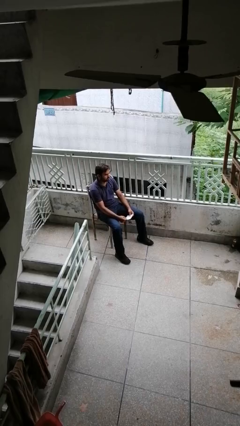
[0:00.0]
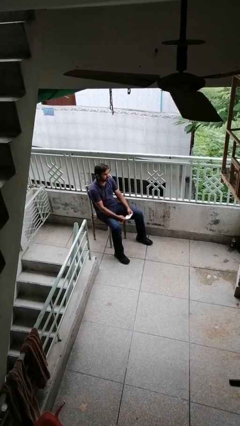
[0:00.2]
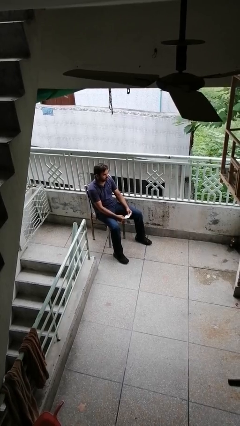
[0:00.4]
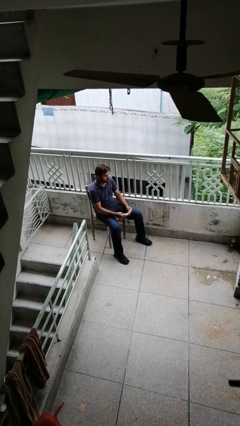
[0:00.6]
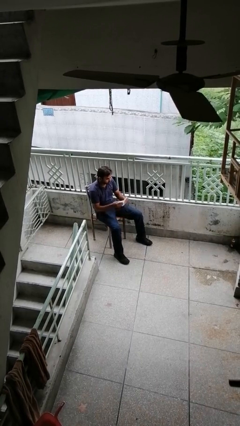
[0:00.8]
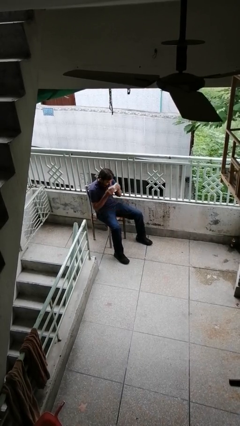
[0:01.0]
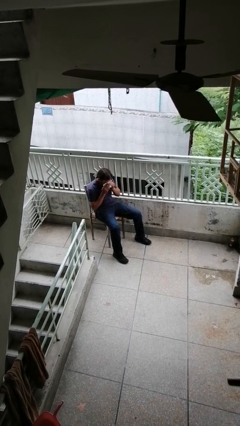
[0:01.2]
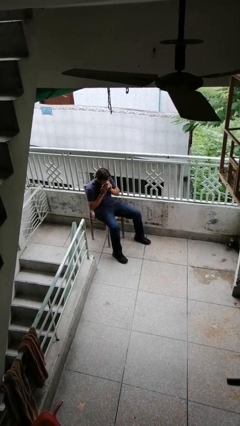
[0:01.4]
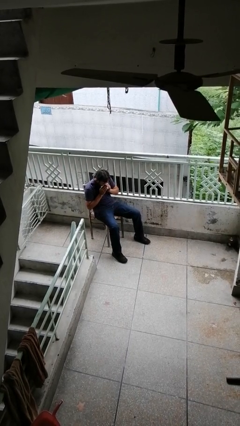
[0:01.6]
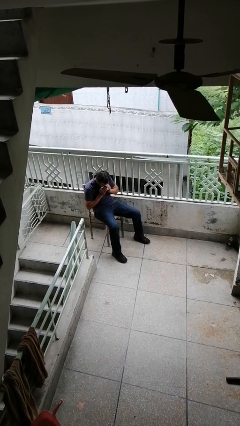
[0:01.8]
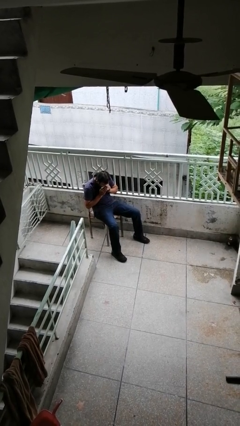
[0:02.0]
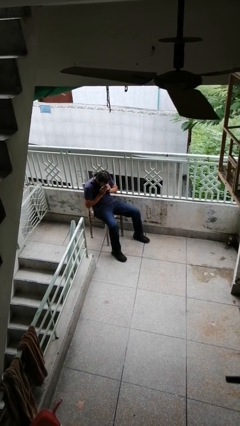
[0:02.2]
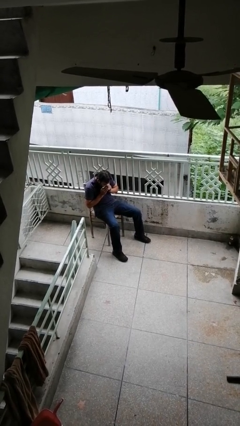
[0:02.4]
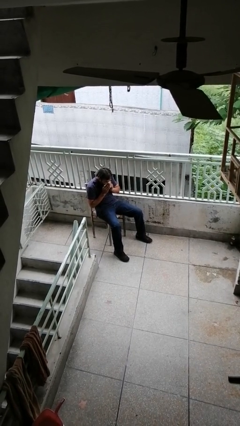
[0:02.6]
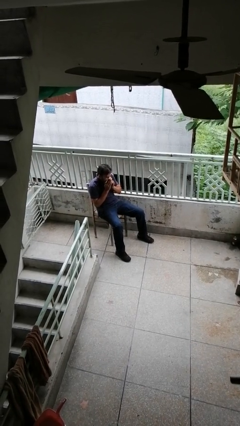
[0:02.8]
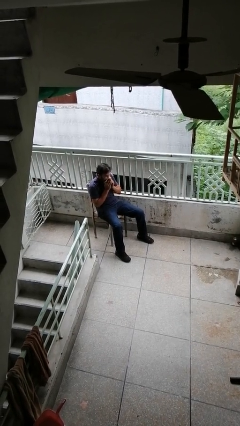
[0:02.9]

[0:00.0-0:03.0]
person blows nose

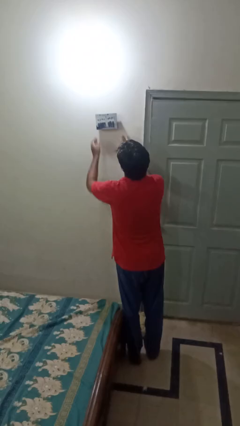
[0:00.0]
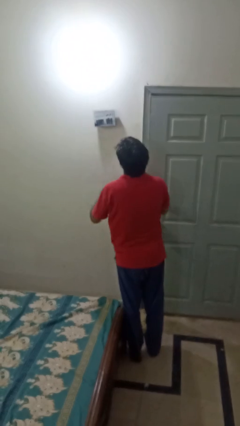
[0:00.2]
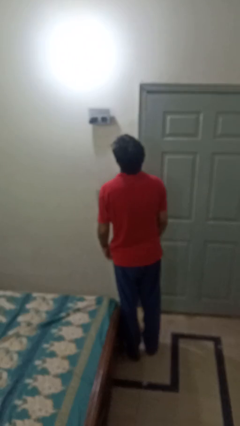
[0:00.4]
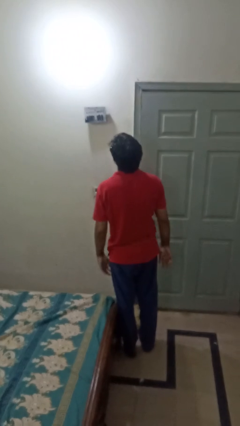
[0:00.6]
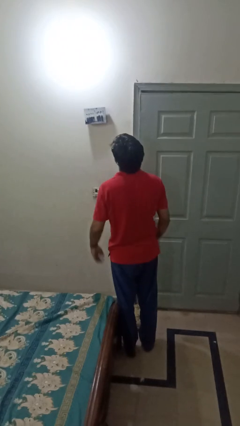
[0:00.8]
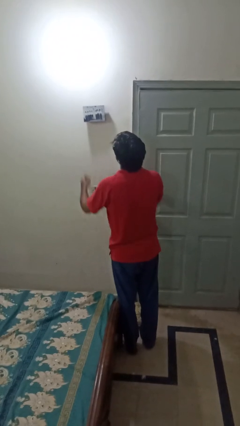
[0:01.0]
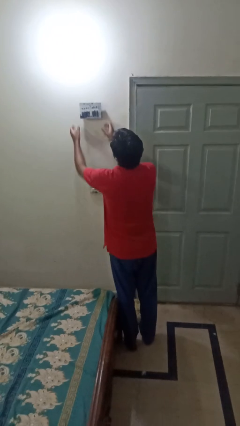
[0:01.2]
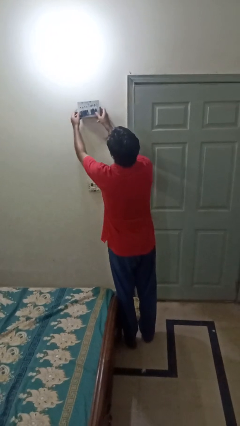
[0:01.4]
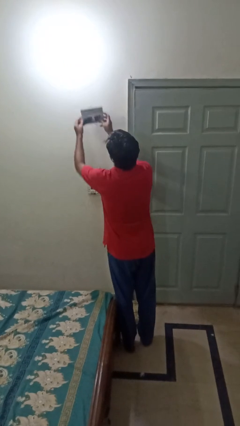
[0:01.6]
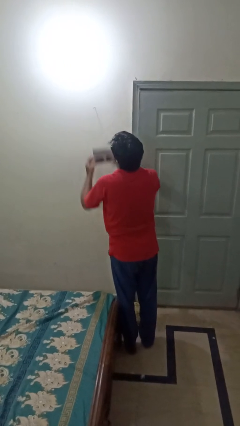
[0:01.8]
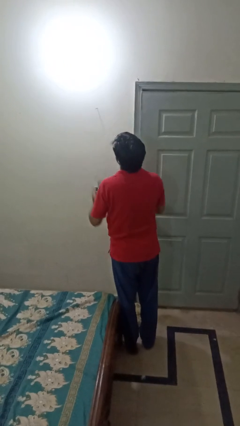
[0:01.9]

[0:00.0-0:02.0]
person takes down picture frame

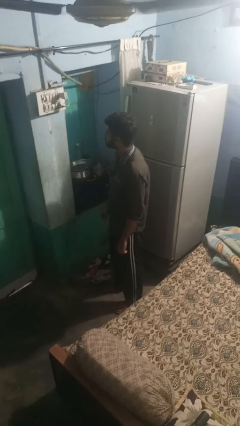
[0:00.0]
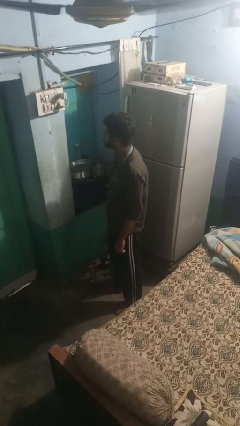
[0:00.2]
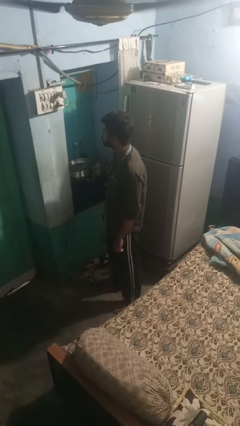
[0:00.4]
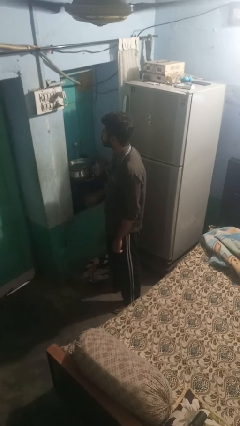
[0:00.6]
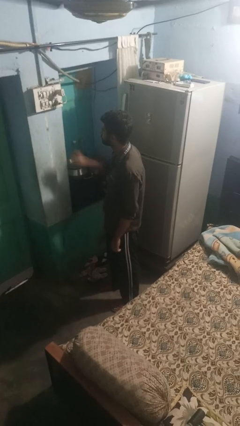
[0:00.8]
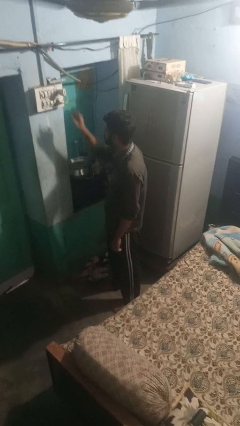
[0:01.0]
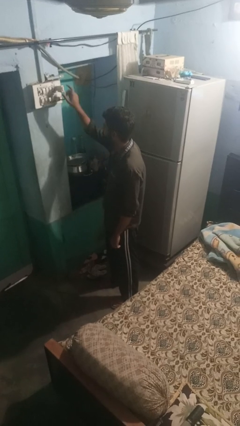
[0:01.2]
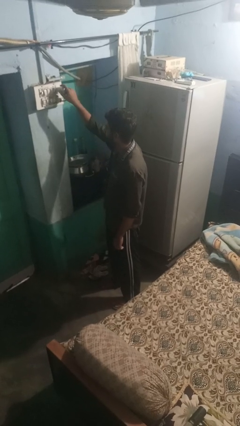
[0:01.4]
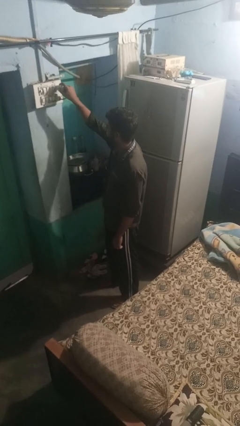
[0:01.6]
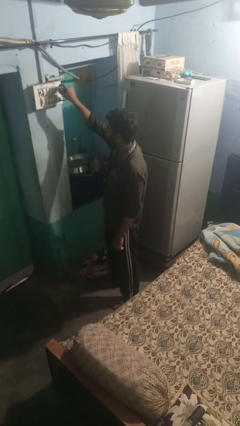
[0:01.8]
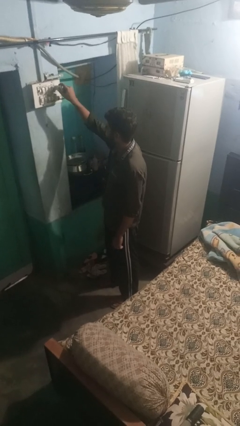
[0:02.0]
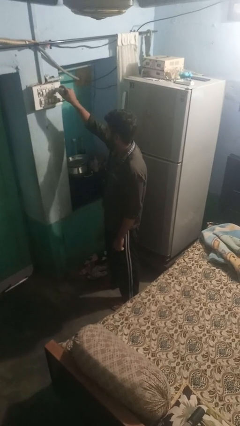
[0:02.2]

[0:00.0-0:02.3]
person unplugs from electrical socket

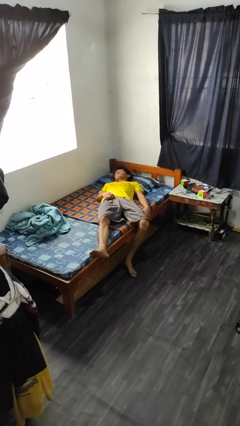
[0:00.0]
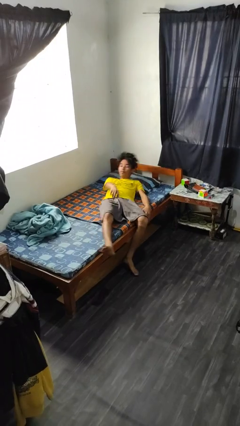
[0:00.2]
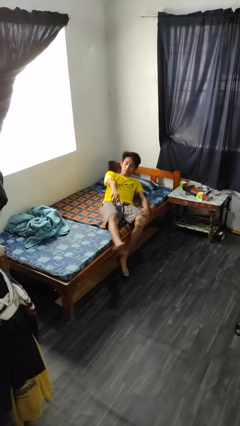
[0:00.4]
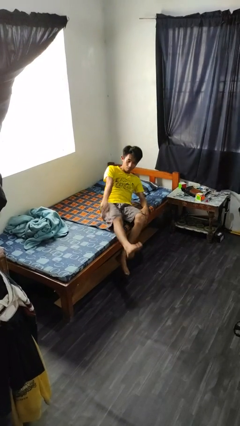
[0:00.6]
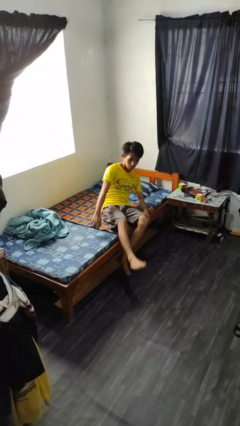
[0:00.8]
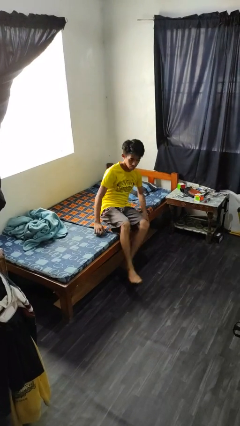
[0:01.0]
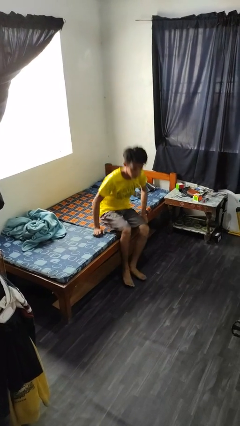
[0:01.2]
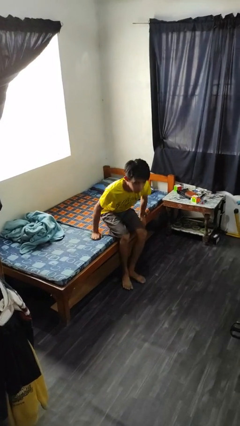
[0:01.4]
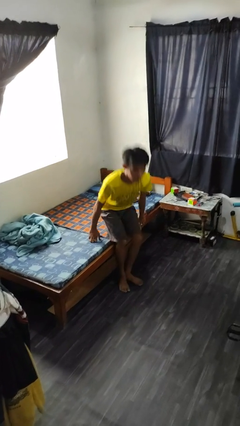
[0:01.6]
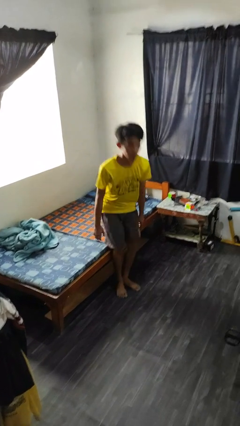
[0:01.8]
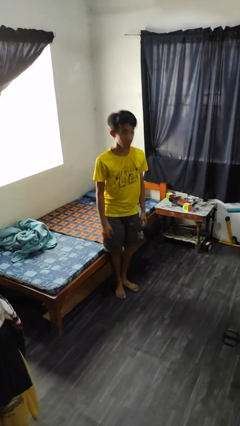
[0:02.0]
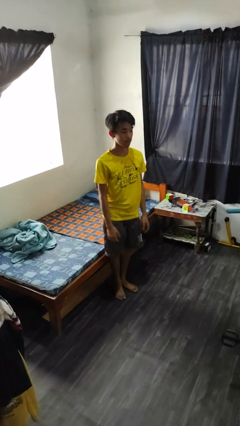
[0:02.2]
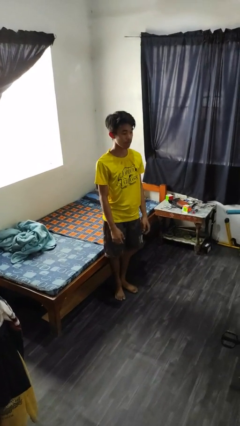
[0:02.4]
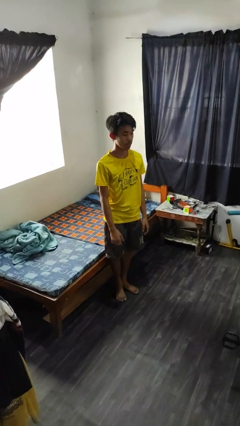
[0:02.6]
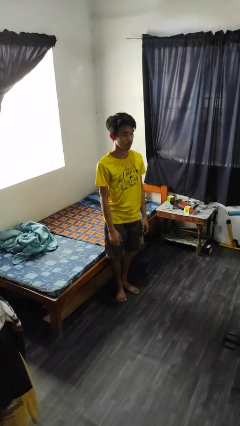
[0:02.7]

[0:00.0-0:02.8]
person stands up

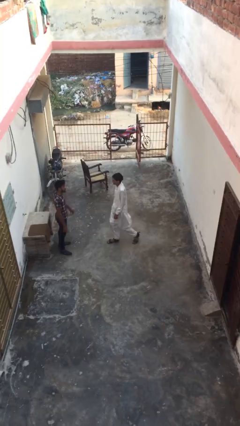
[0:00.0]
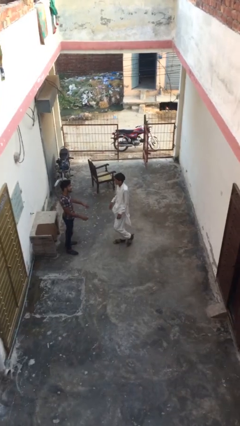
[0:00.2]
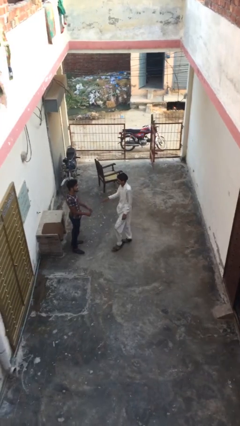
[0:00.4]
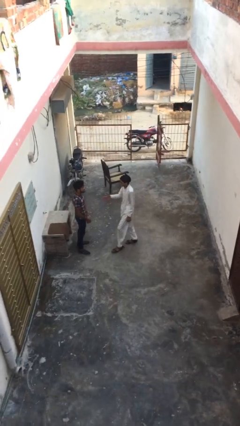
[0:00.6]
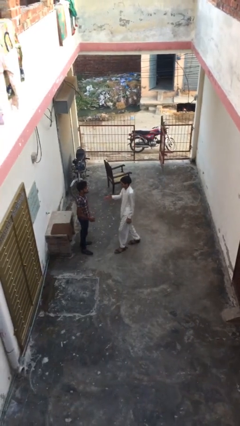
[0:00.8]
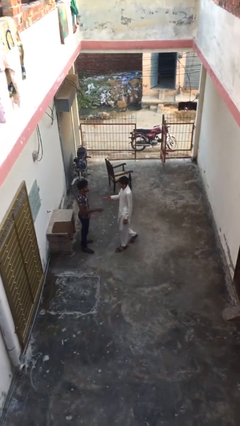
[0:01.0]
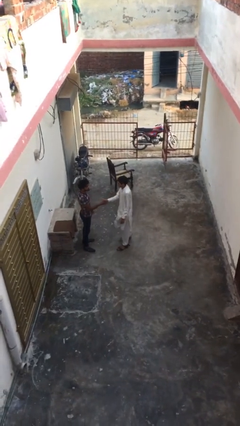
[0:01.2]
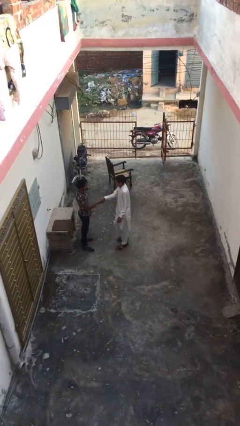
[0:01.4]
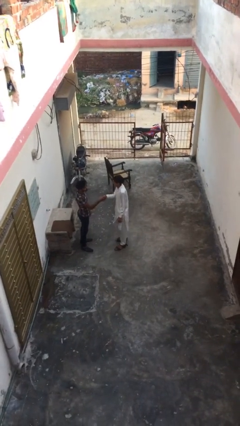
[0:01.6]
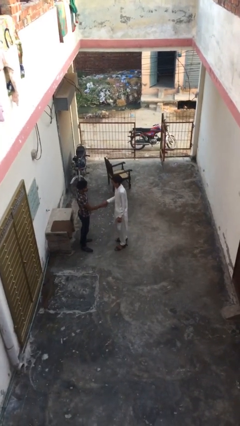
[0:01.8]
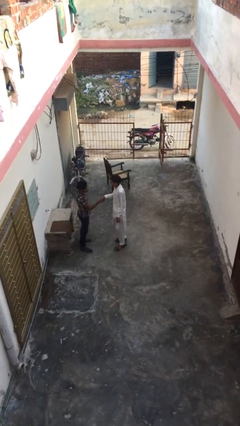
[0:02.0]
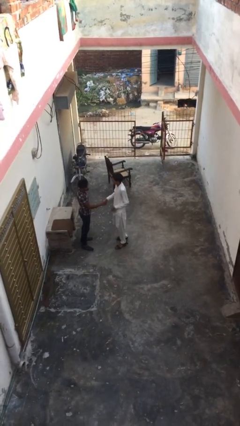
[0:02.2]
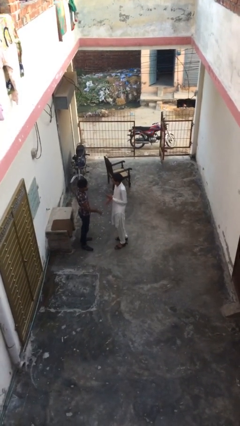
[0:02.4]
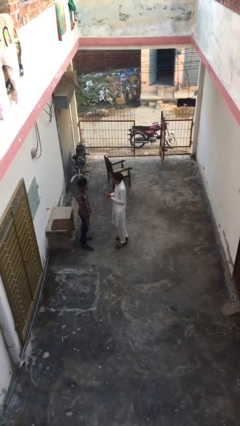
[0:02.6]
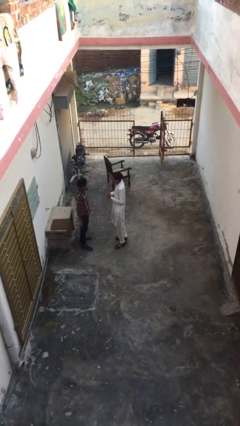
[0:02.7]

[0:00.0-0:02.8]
person shakes hand

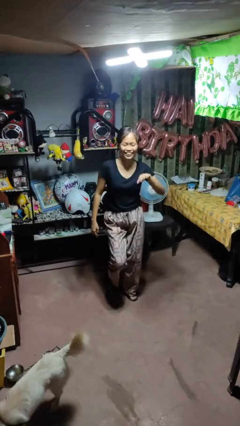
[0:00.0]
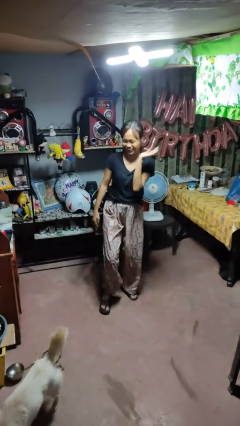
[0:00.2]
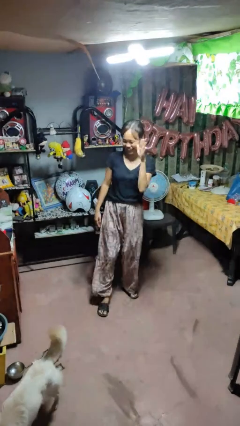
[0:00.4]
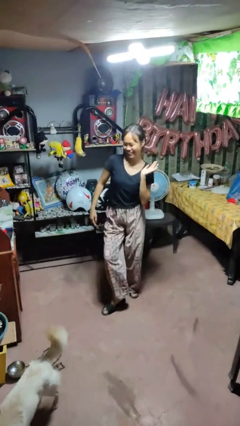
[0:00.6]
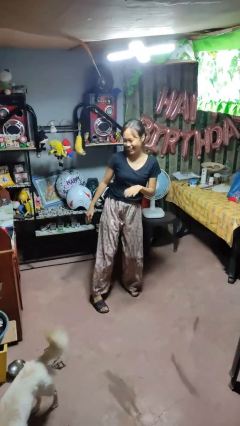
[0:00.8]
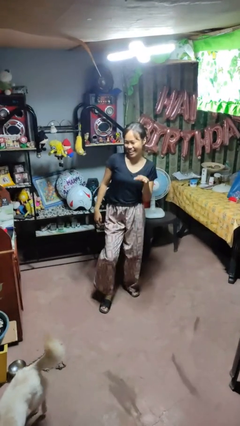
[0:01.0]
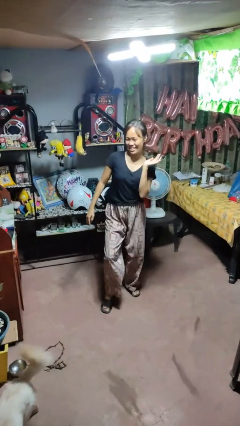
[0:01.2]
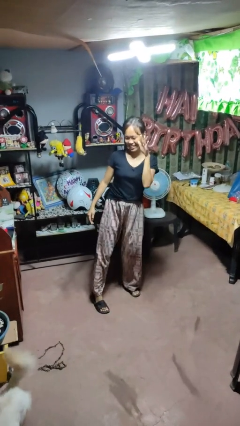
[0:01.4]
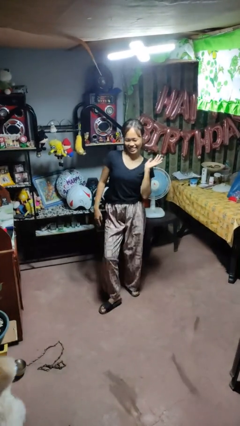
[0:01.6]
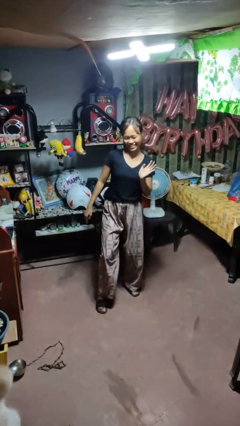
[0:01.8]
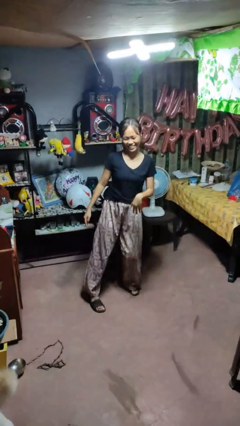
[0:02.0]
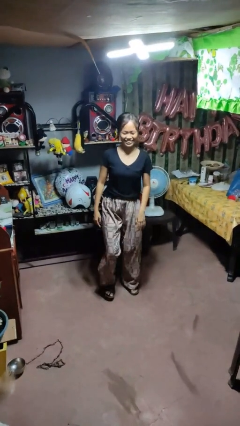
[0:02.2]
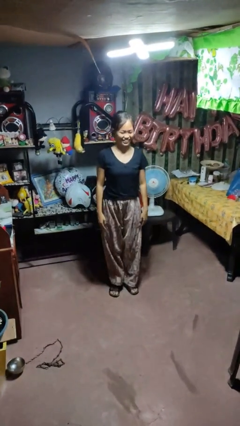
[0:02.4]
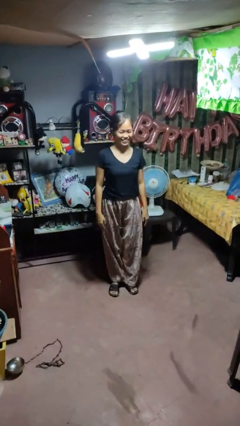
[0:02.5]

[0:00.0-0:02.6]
person dances in place

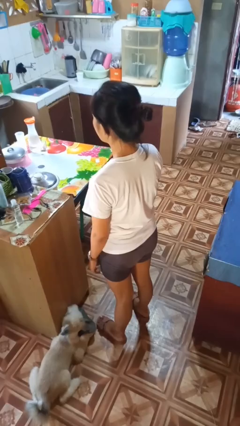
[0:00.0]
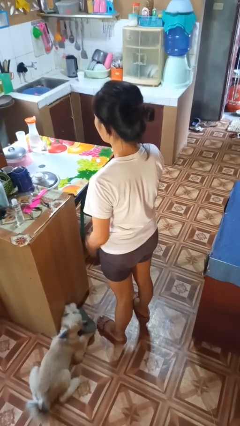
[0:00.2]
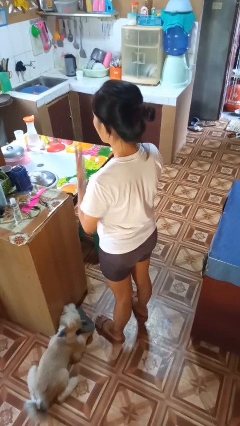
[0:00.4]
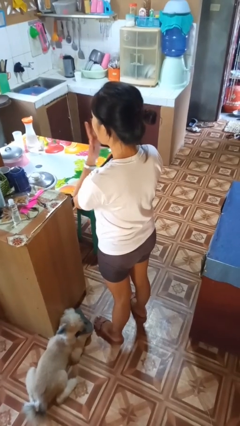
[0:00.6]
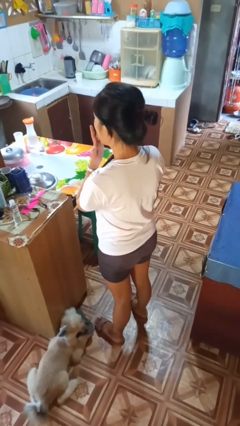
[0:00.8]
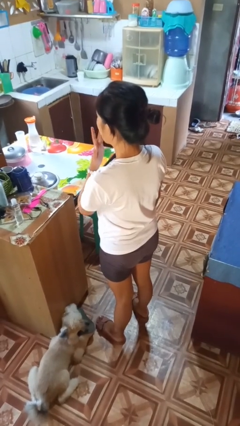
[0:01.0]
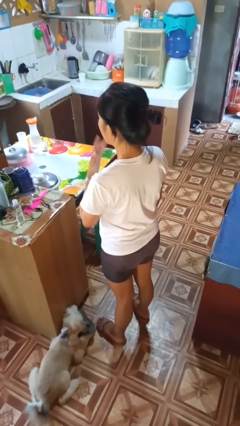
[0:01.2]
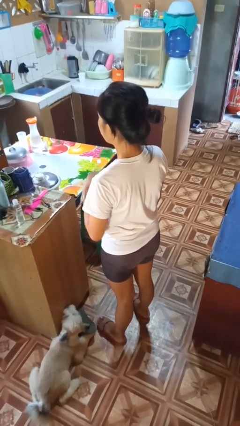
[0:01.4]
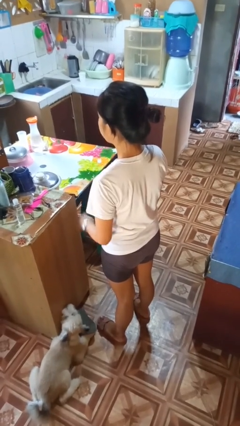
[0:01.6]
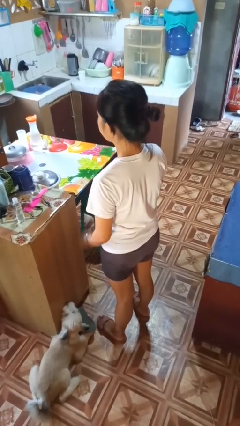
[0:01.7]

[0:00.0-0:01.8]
person licks fingers
